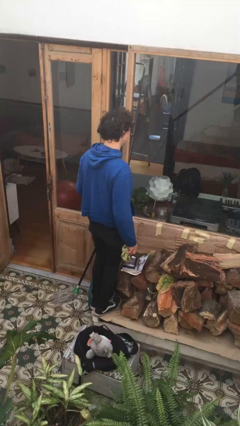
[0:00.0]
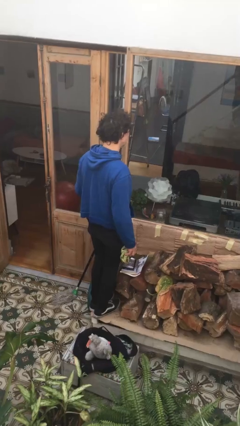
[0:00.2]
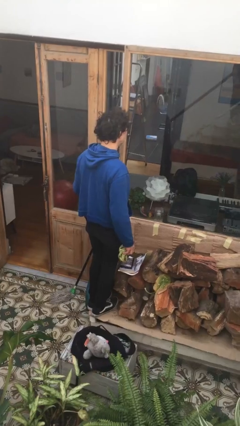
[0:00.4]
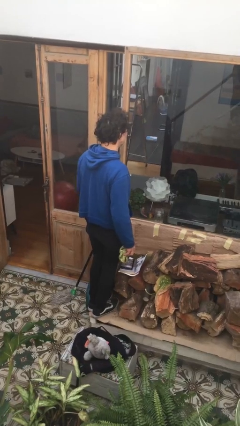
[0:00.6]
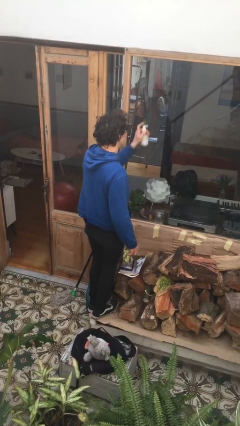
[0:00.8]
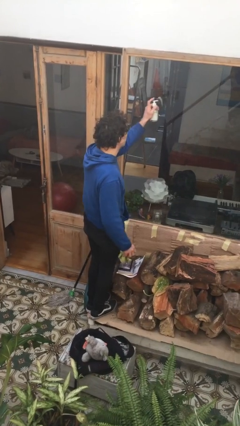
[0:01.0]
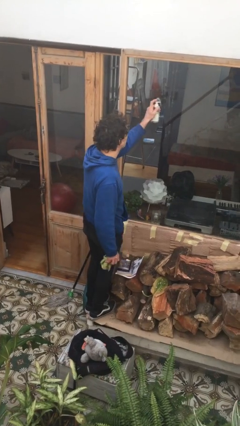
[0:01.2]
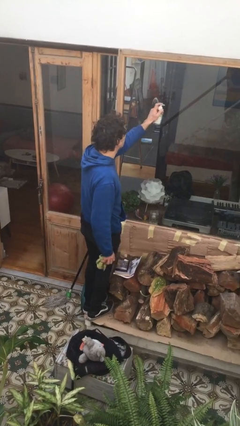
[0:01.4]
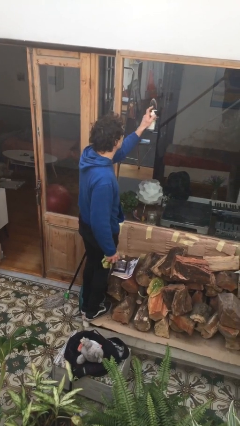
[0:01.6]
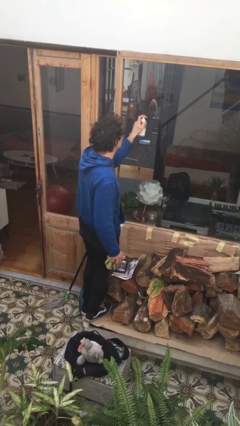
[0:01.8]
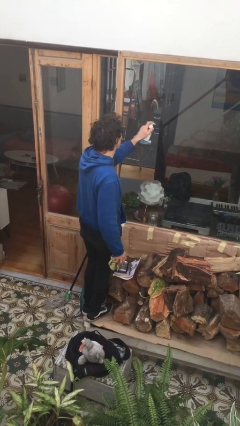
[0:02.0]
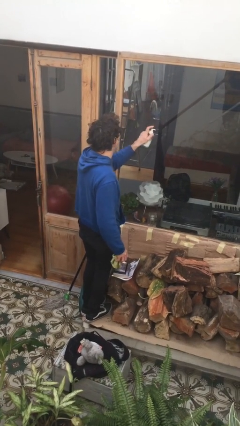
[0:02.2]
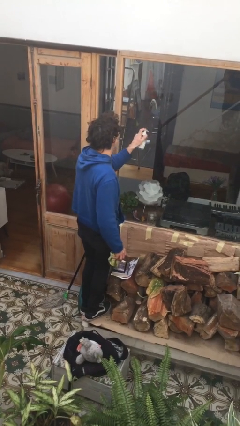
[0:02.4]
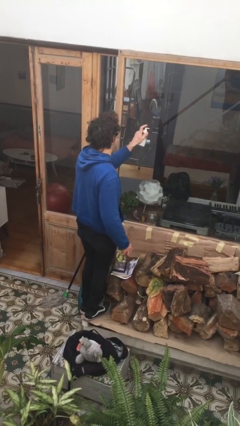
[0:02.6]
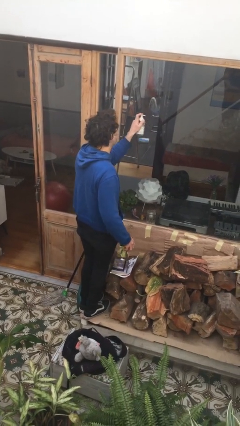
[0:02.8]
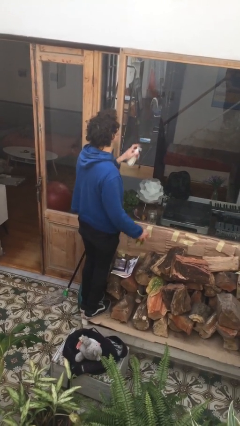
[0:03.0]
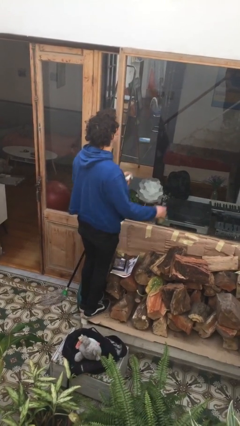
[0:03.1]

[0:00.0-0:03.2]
person sprays from bottle

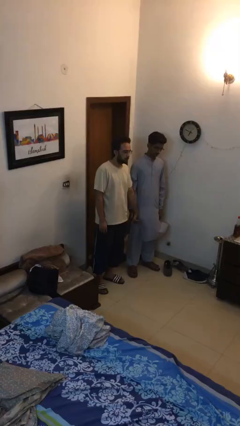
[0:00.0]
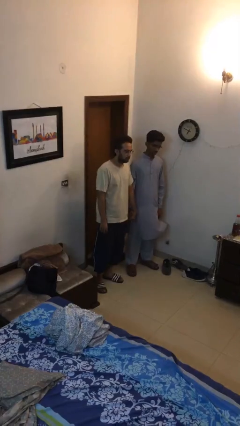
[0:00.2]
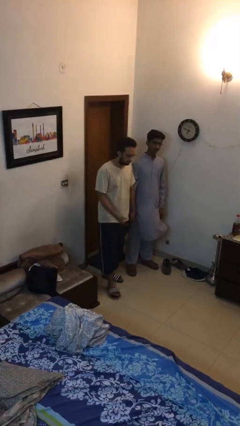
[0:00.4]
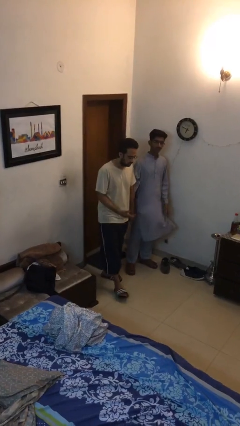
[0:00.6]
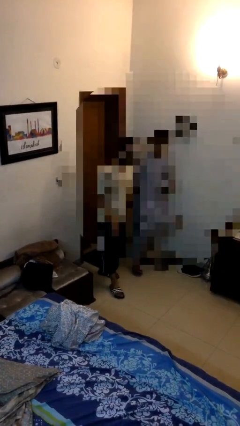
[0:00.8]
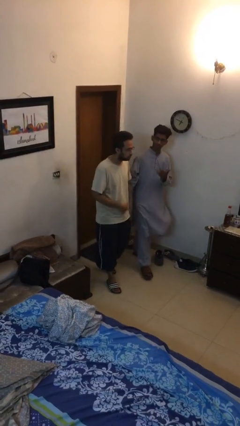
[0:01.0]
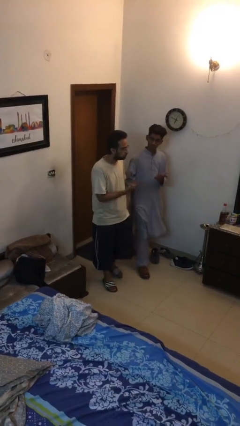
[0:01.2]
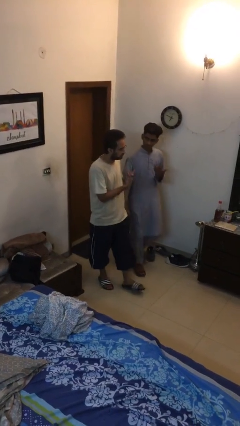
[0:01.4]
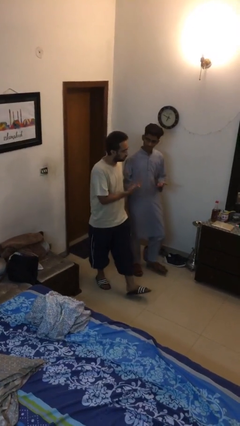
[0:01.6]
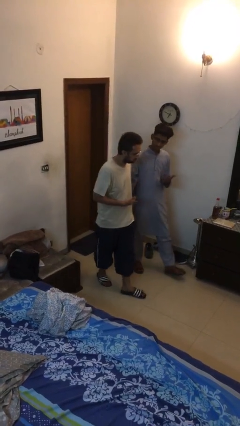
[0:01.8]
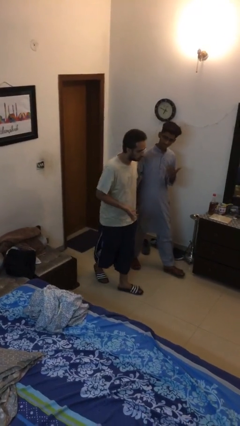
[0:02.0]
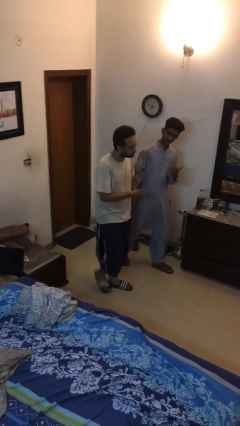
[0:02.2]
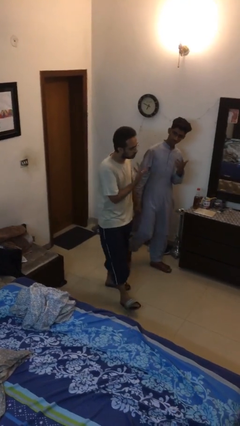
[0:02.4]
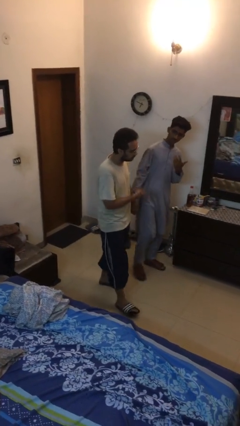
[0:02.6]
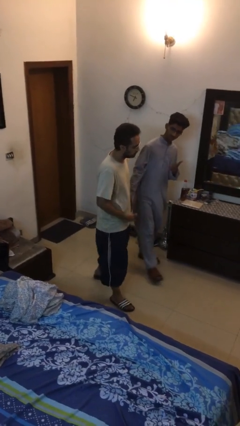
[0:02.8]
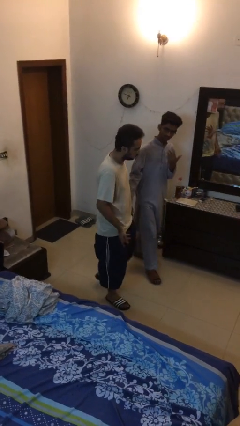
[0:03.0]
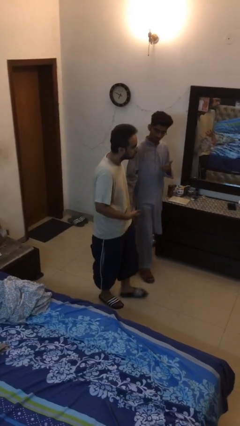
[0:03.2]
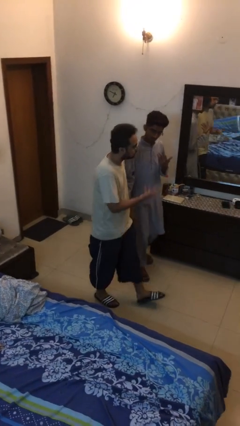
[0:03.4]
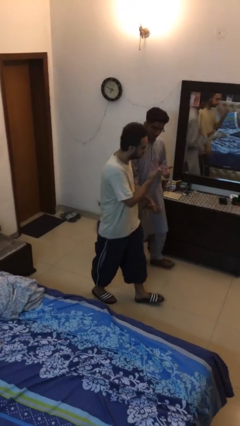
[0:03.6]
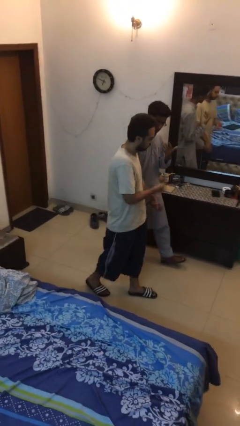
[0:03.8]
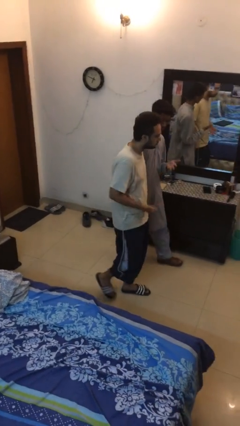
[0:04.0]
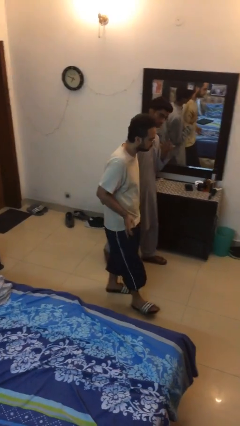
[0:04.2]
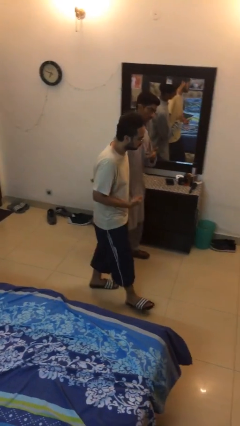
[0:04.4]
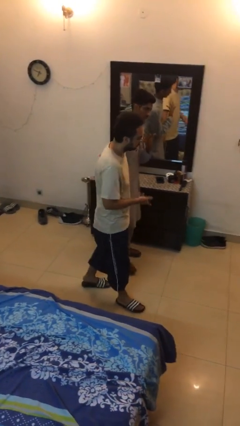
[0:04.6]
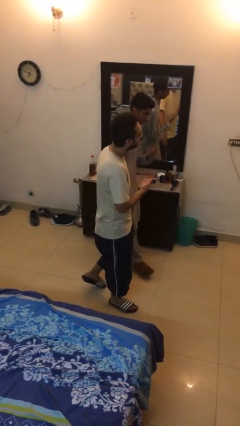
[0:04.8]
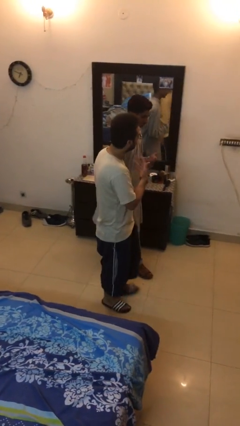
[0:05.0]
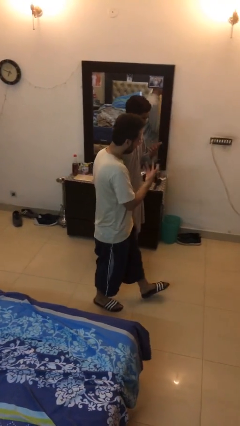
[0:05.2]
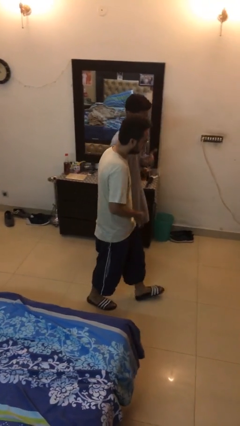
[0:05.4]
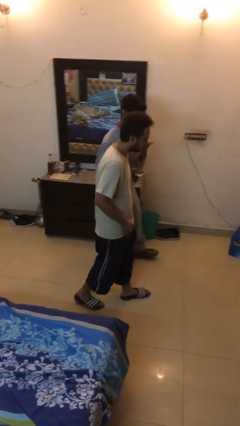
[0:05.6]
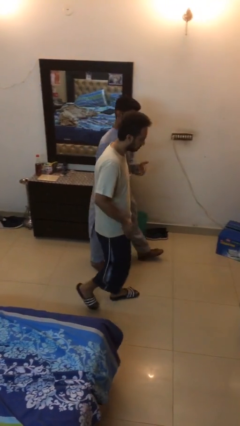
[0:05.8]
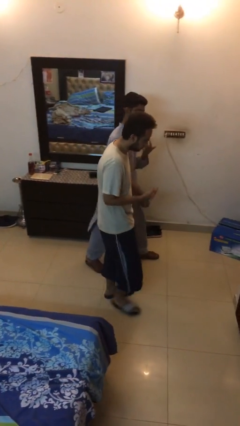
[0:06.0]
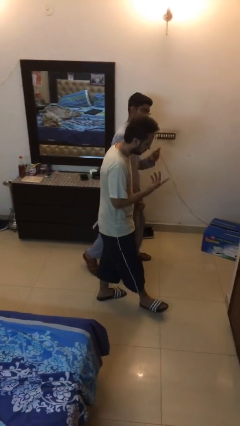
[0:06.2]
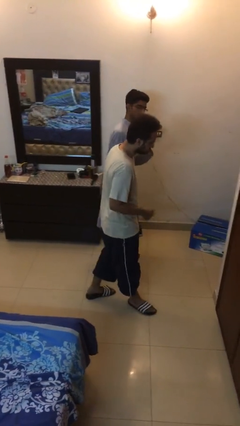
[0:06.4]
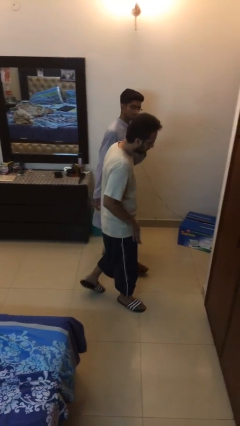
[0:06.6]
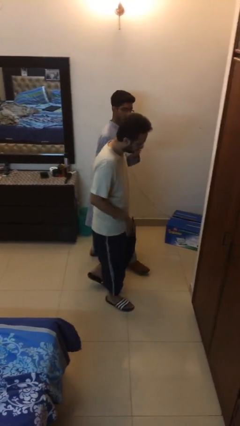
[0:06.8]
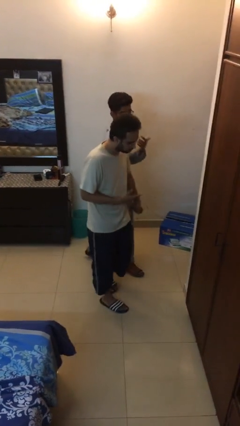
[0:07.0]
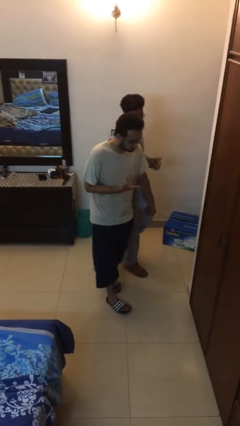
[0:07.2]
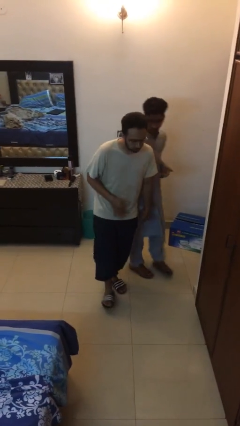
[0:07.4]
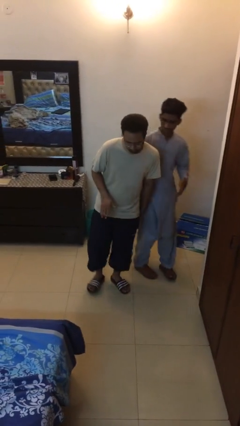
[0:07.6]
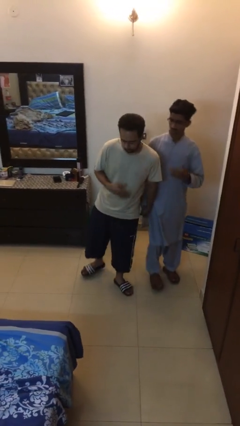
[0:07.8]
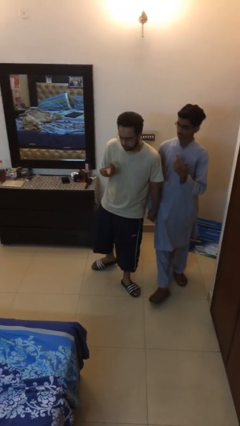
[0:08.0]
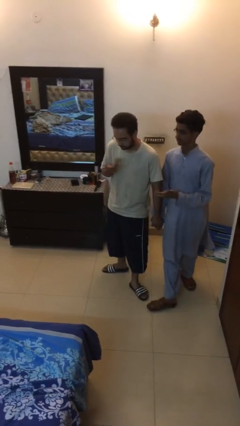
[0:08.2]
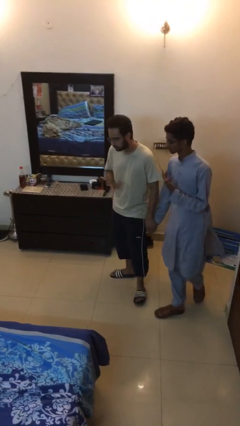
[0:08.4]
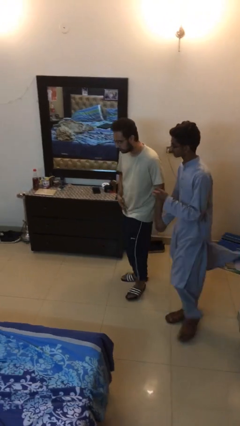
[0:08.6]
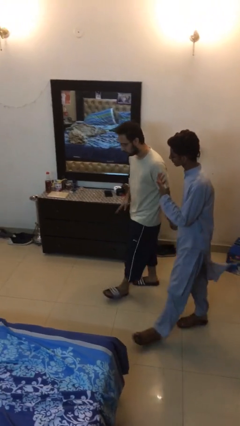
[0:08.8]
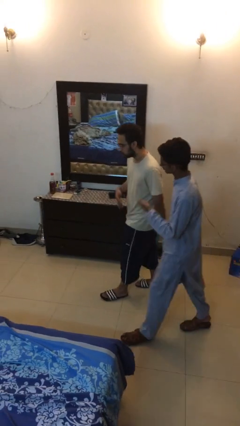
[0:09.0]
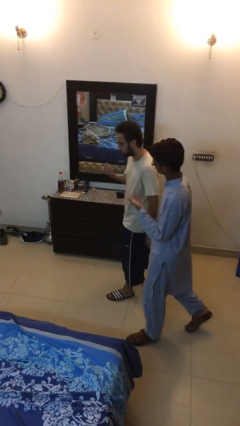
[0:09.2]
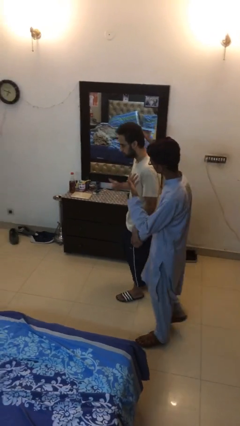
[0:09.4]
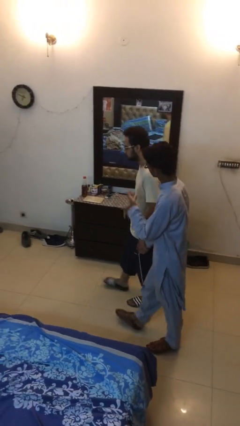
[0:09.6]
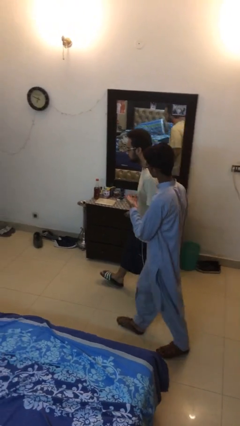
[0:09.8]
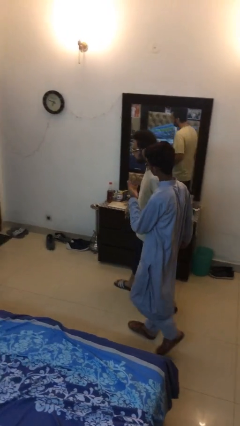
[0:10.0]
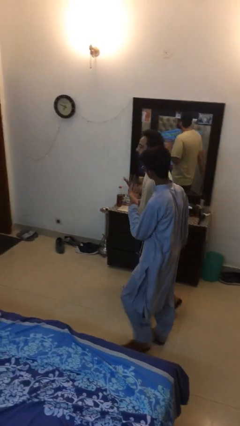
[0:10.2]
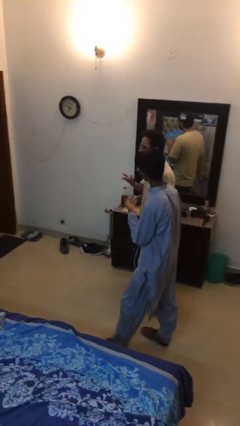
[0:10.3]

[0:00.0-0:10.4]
person holds hand

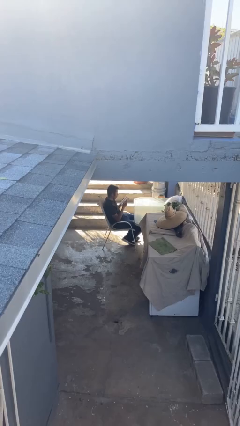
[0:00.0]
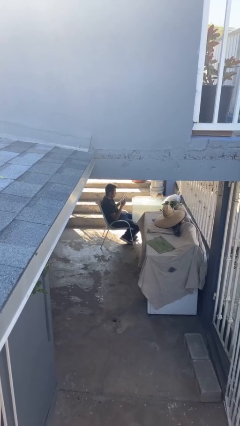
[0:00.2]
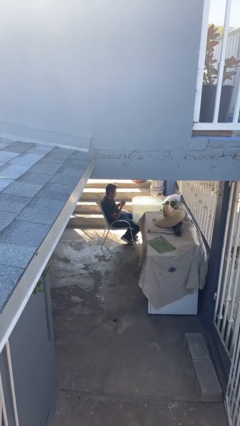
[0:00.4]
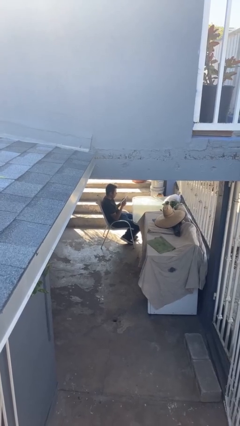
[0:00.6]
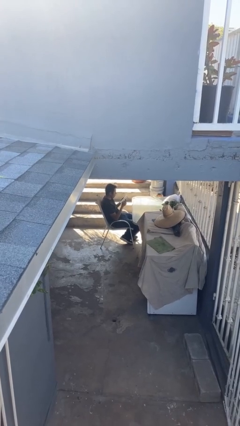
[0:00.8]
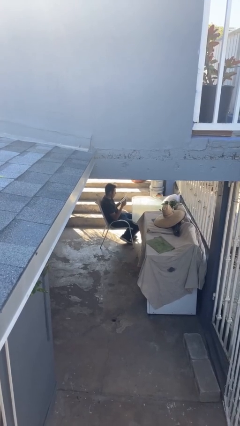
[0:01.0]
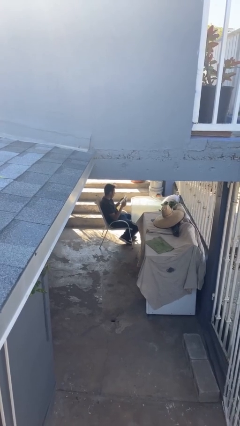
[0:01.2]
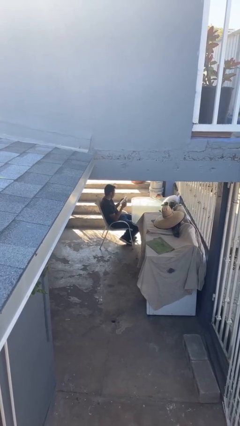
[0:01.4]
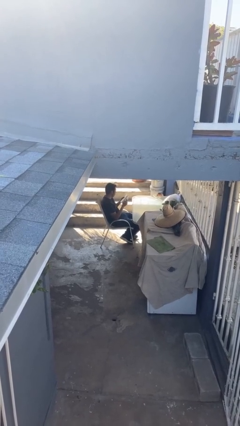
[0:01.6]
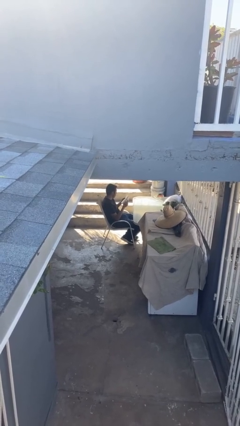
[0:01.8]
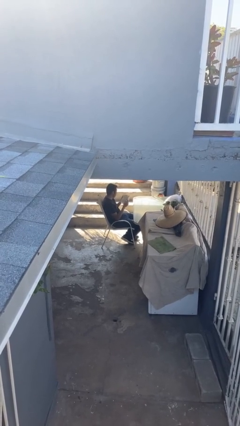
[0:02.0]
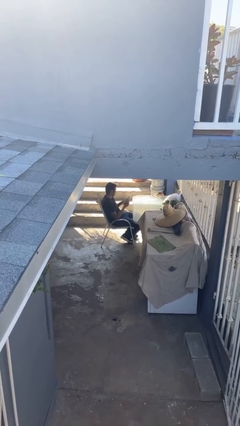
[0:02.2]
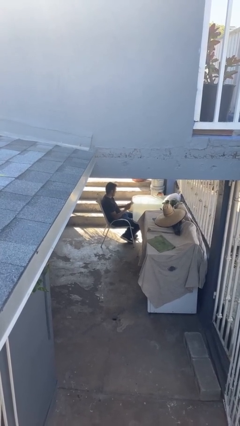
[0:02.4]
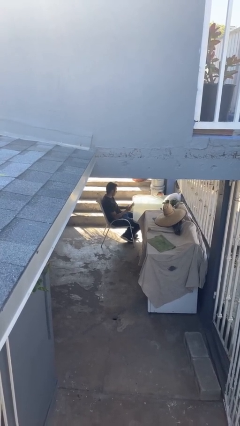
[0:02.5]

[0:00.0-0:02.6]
person reads document

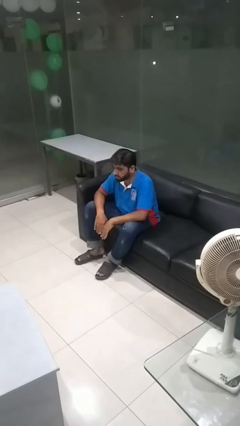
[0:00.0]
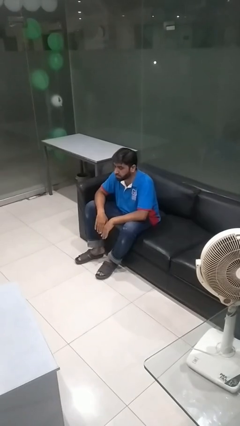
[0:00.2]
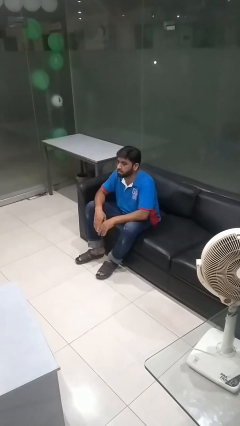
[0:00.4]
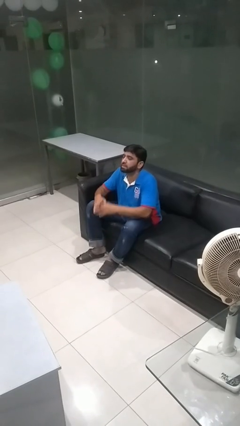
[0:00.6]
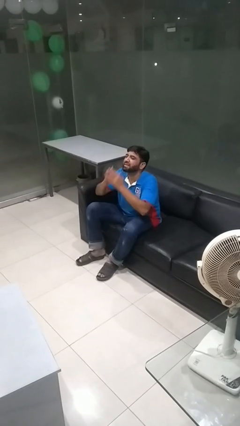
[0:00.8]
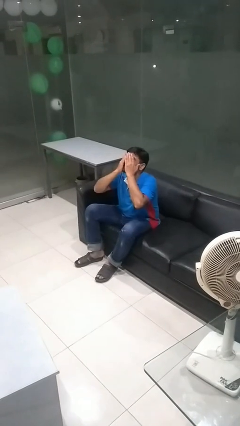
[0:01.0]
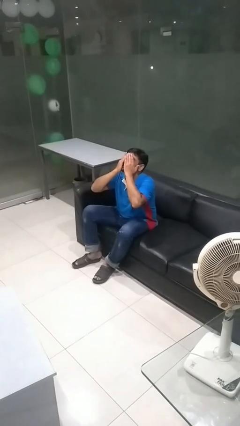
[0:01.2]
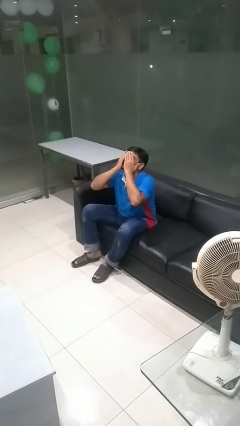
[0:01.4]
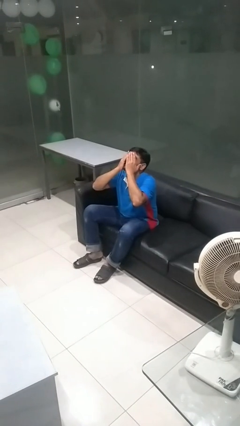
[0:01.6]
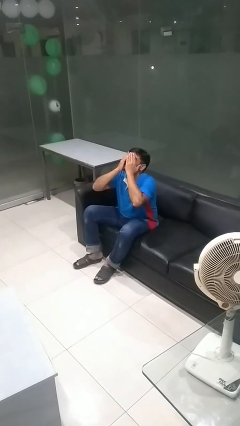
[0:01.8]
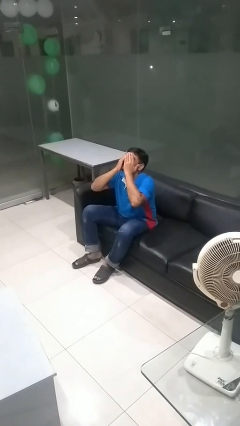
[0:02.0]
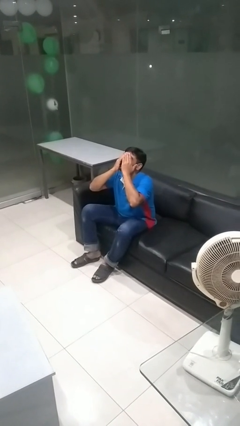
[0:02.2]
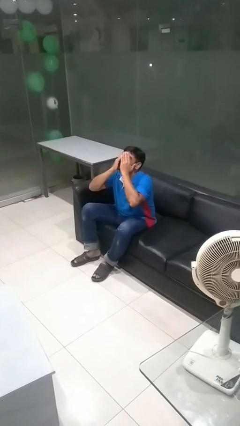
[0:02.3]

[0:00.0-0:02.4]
person covers face with hands
